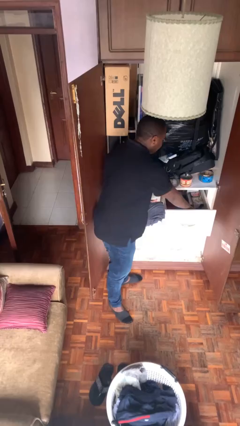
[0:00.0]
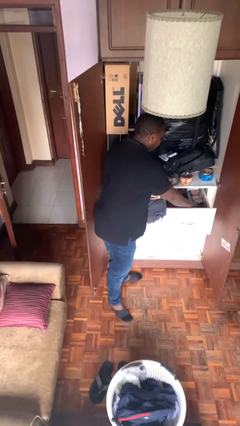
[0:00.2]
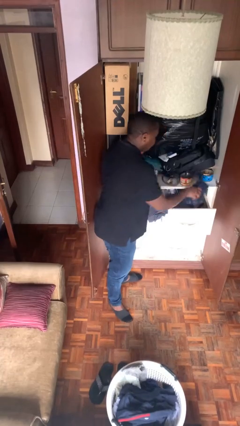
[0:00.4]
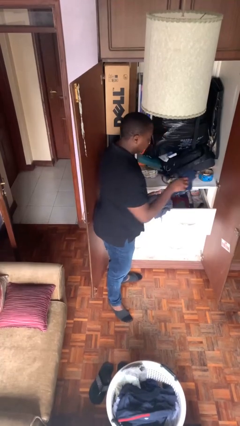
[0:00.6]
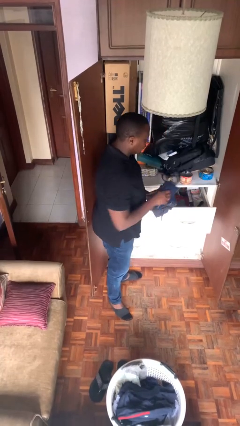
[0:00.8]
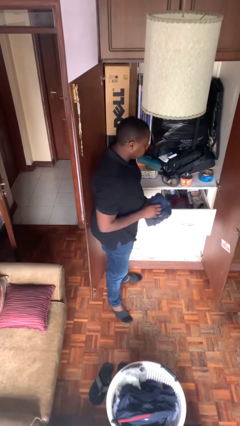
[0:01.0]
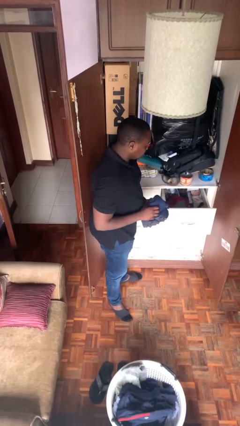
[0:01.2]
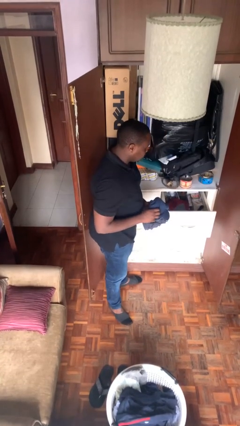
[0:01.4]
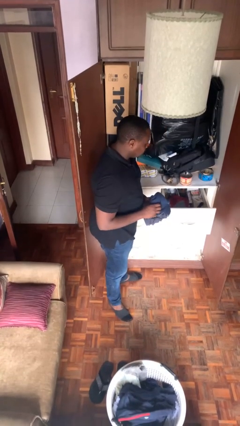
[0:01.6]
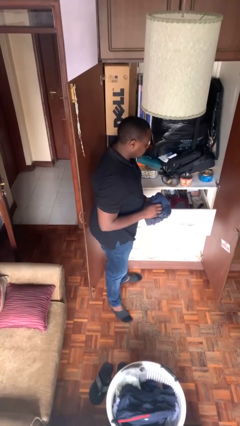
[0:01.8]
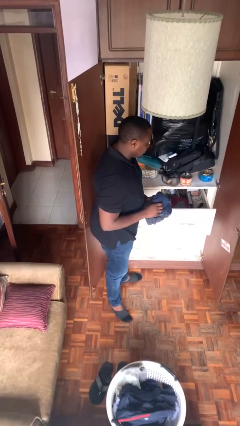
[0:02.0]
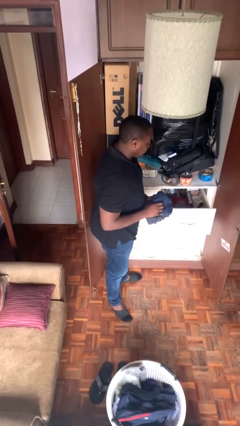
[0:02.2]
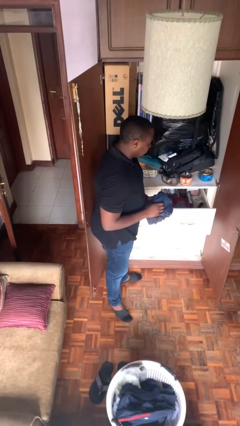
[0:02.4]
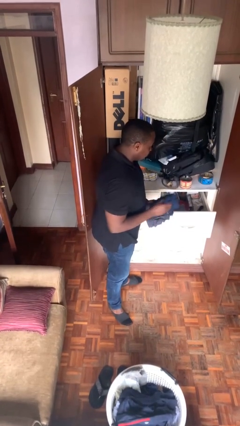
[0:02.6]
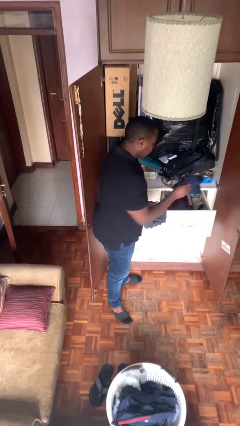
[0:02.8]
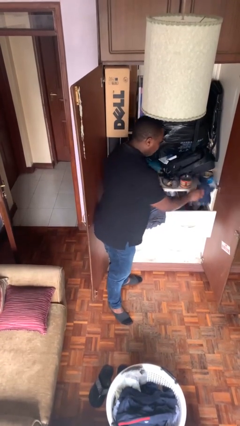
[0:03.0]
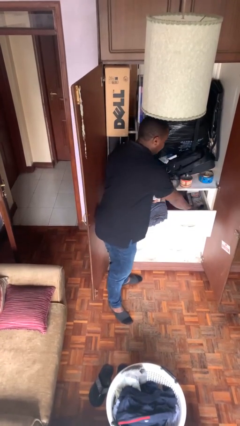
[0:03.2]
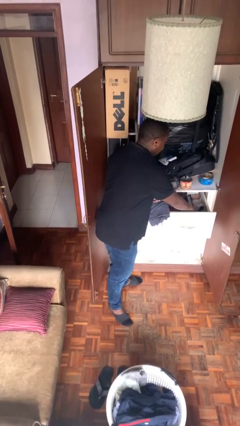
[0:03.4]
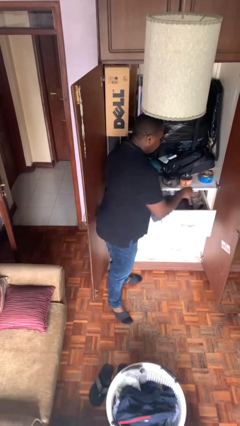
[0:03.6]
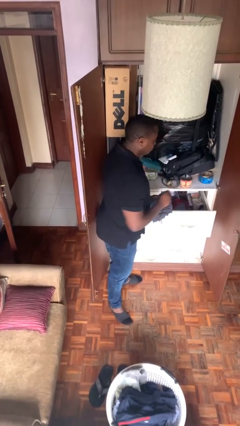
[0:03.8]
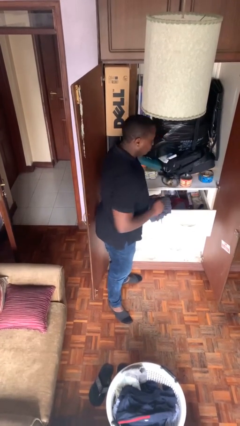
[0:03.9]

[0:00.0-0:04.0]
person takes clothes from dresser

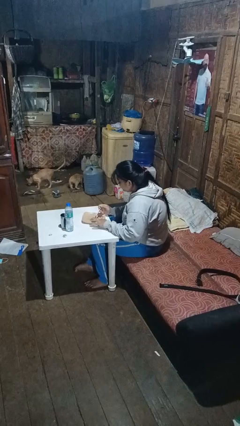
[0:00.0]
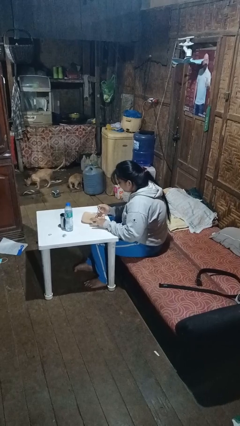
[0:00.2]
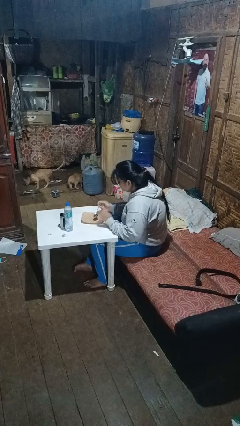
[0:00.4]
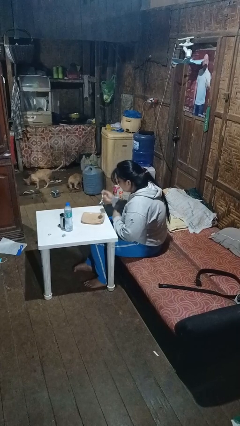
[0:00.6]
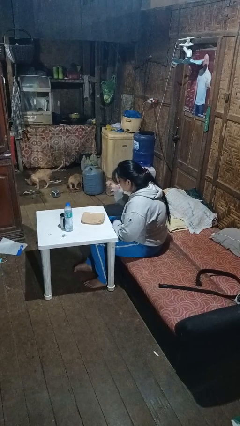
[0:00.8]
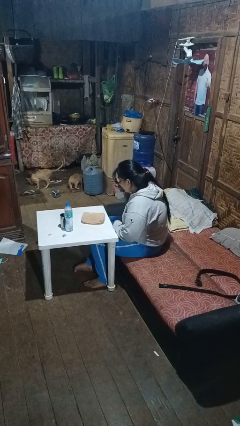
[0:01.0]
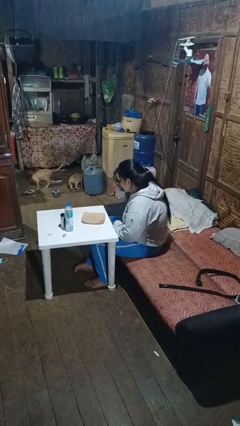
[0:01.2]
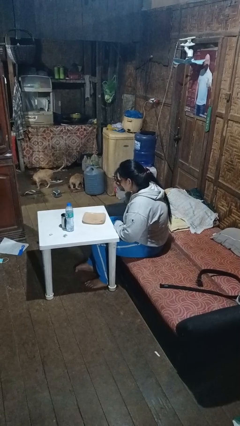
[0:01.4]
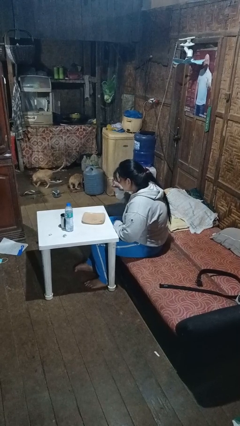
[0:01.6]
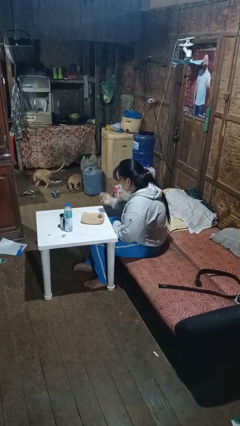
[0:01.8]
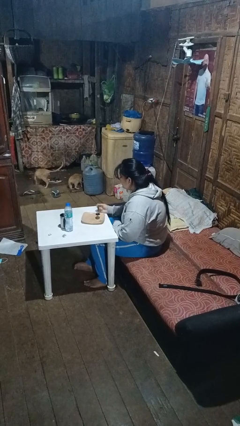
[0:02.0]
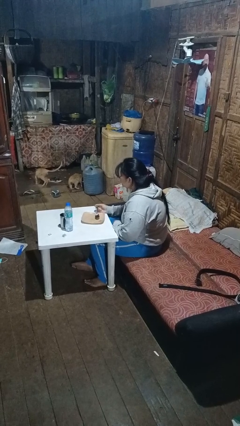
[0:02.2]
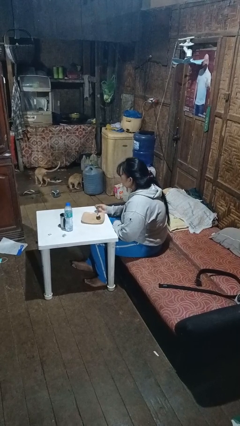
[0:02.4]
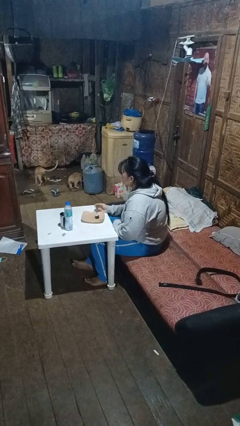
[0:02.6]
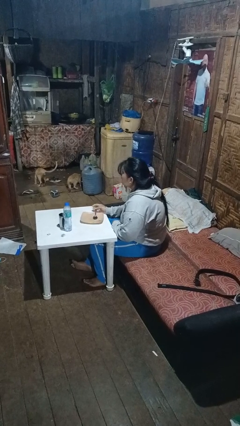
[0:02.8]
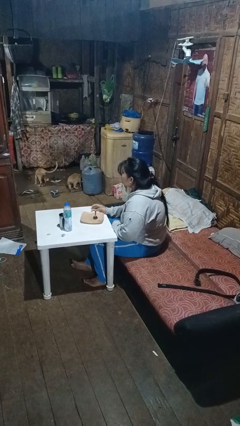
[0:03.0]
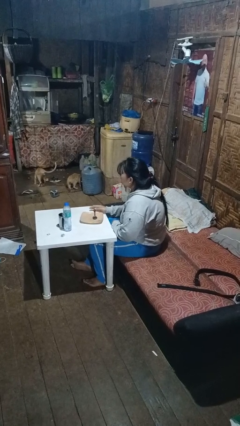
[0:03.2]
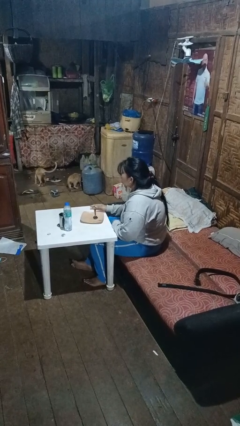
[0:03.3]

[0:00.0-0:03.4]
person eats with utensil

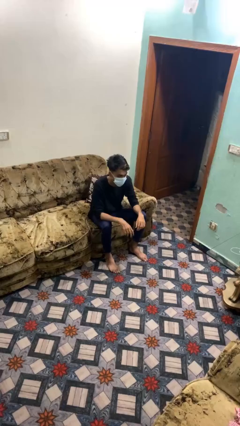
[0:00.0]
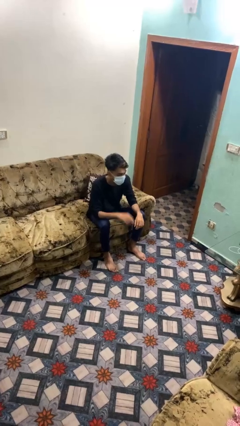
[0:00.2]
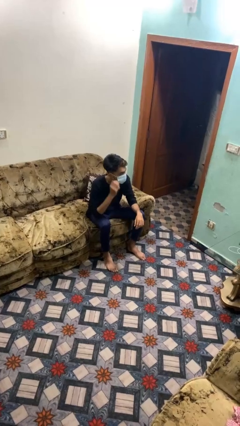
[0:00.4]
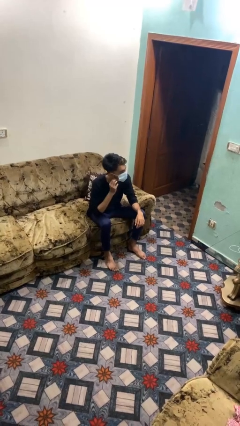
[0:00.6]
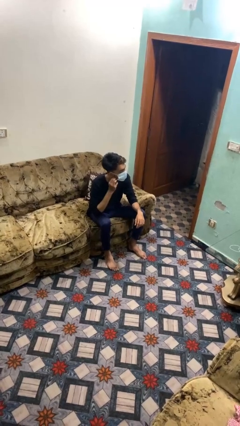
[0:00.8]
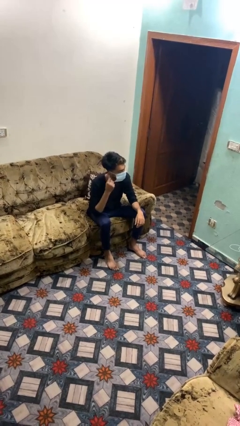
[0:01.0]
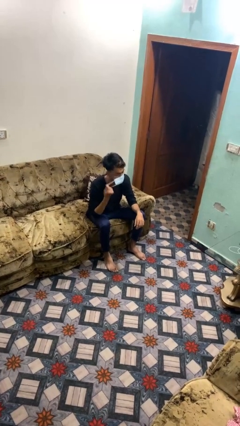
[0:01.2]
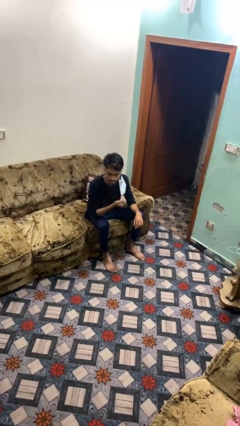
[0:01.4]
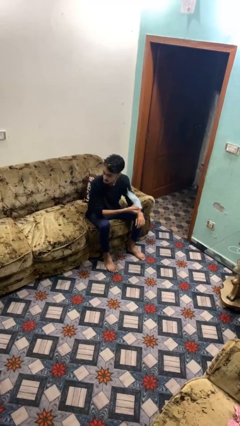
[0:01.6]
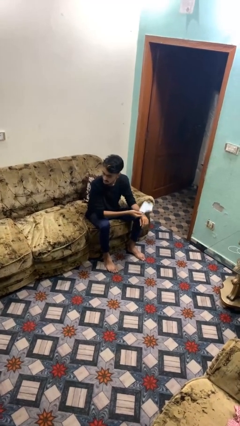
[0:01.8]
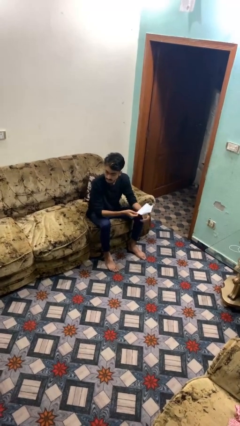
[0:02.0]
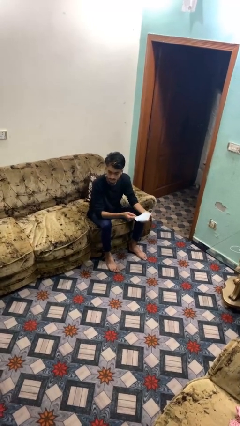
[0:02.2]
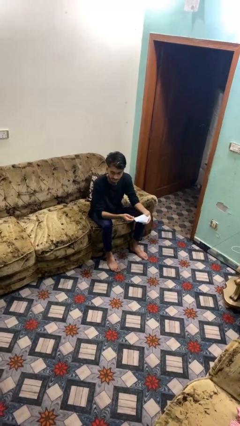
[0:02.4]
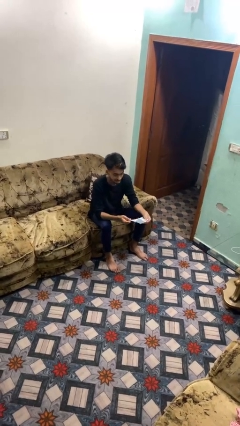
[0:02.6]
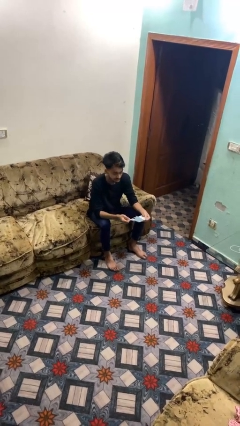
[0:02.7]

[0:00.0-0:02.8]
person takes off facemask

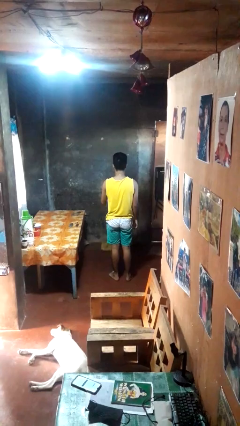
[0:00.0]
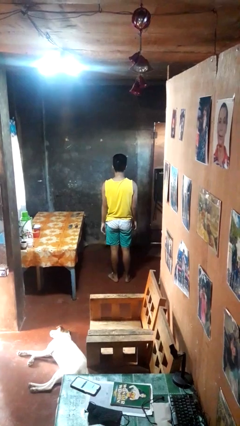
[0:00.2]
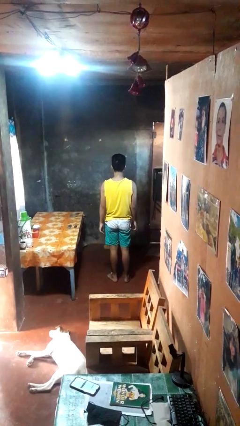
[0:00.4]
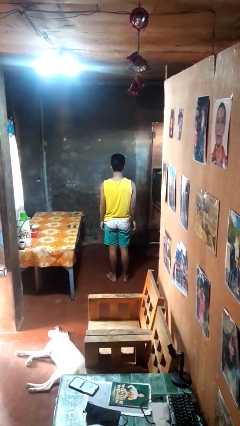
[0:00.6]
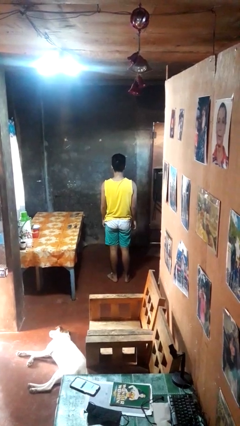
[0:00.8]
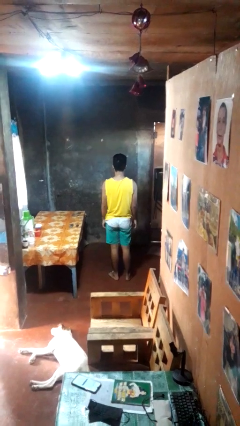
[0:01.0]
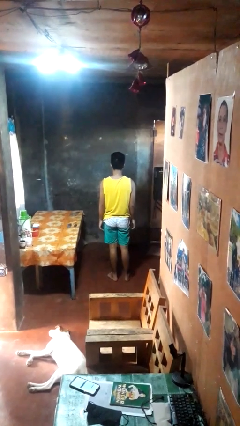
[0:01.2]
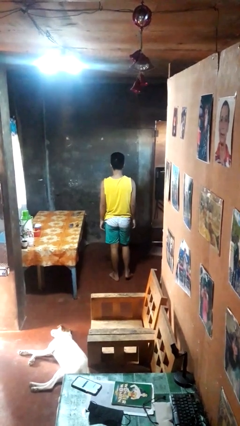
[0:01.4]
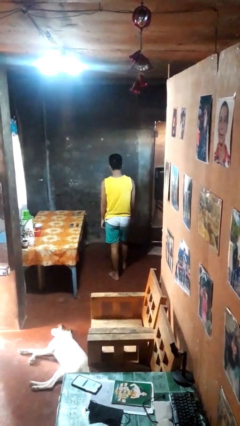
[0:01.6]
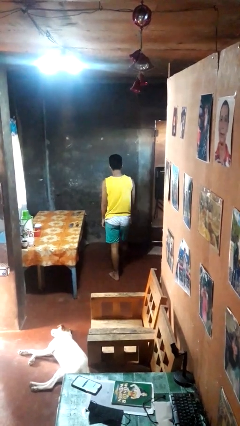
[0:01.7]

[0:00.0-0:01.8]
person throws object to ground

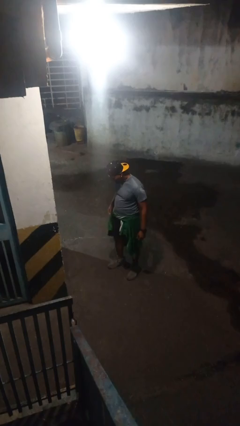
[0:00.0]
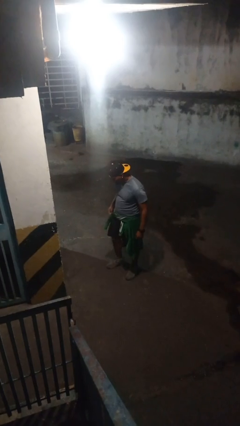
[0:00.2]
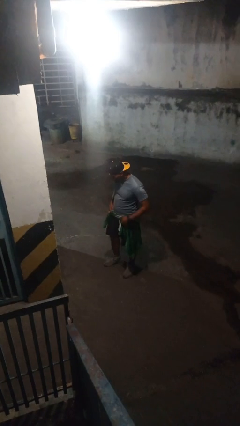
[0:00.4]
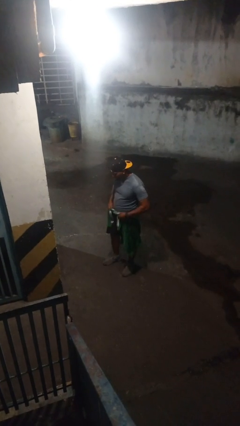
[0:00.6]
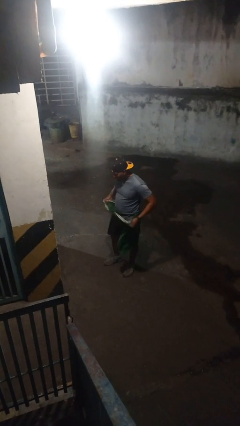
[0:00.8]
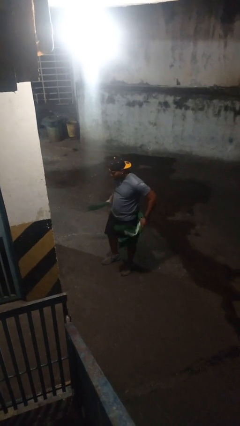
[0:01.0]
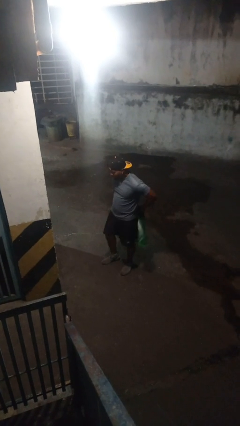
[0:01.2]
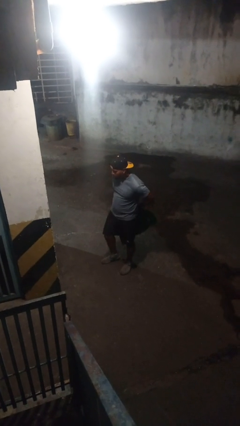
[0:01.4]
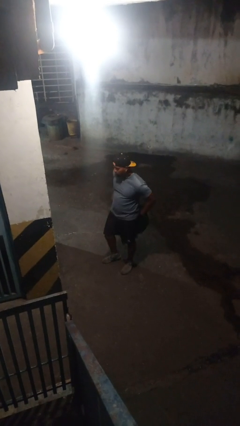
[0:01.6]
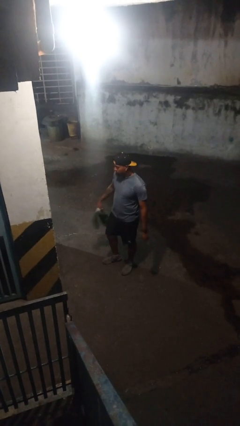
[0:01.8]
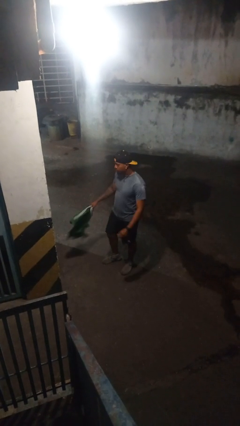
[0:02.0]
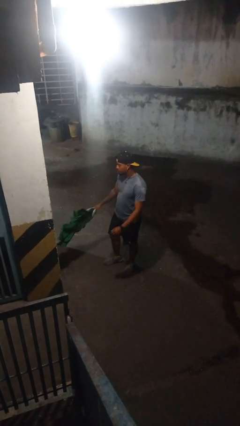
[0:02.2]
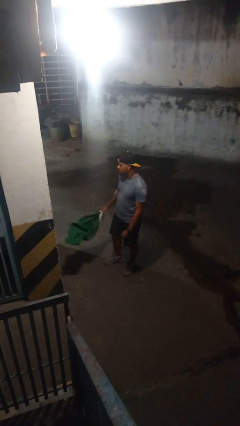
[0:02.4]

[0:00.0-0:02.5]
person unties jacket around waist

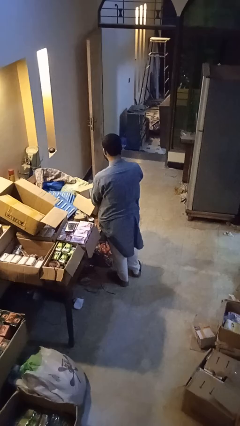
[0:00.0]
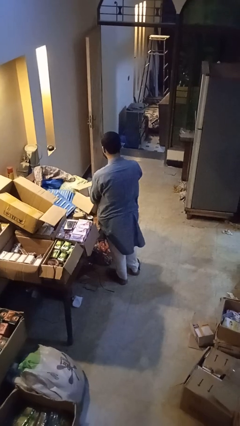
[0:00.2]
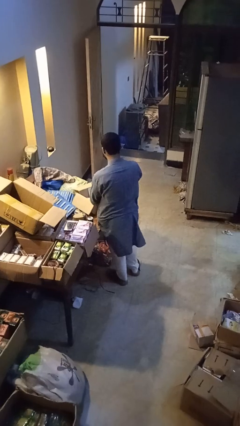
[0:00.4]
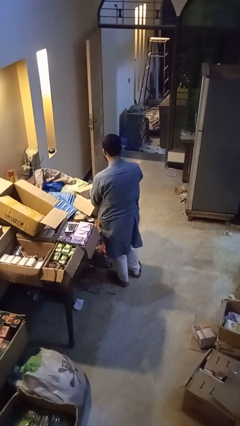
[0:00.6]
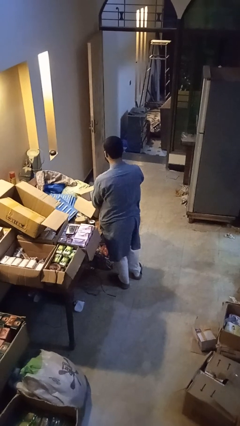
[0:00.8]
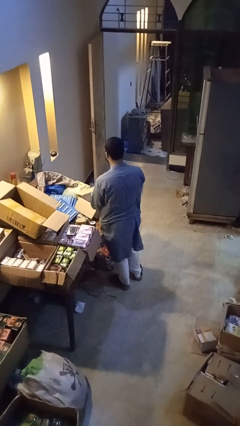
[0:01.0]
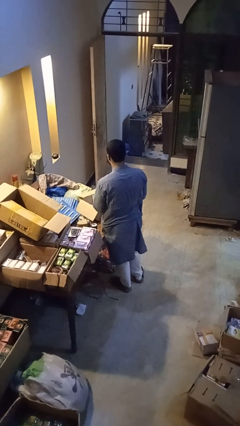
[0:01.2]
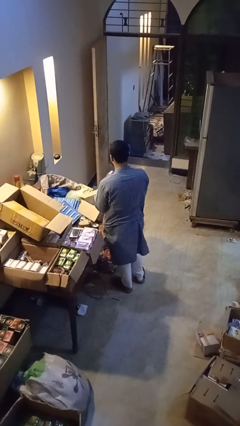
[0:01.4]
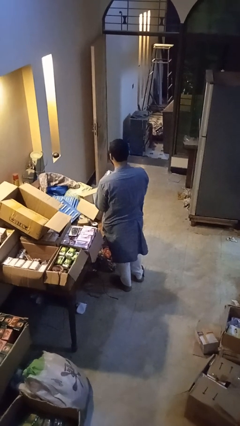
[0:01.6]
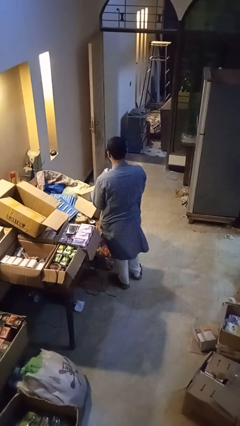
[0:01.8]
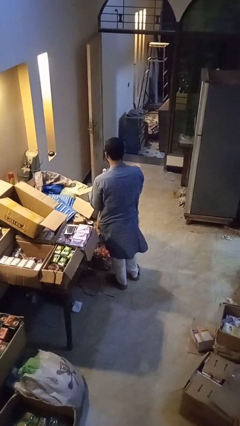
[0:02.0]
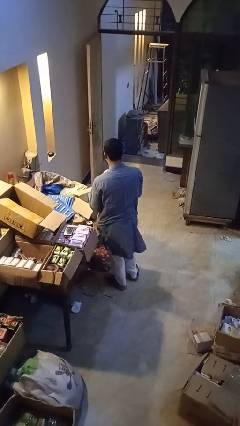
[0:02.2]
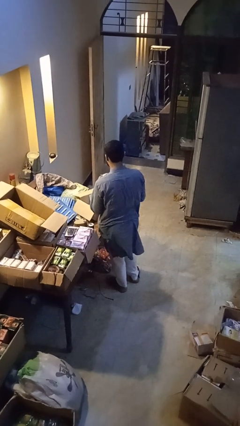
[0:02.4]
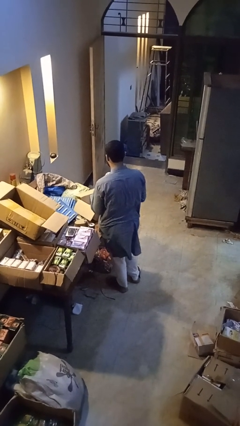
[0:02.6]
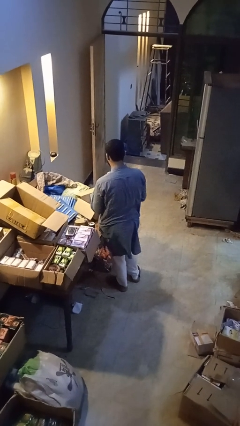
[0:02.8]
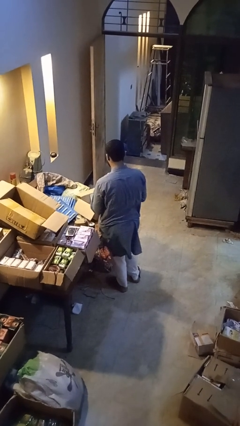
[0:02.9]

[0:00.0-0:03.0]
person takes object from box
